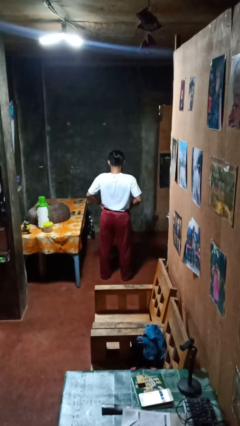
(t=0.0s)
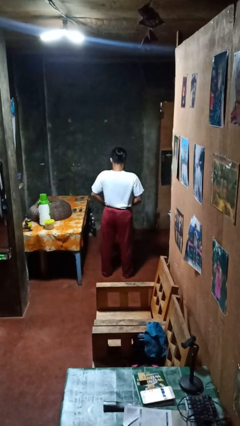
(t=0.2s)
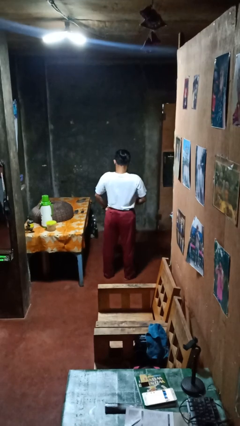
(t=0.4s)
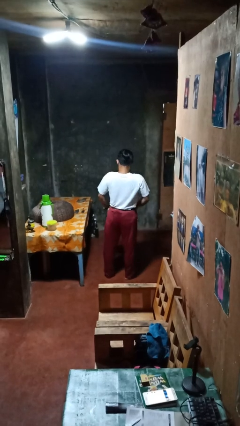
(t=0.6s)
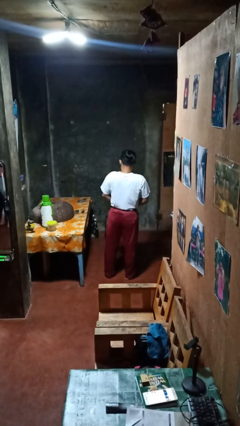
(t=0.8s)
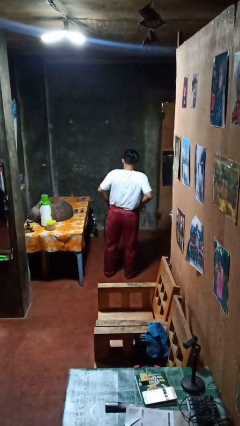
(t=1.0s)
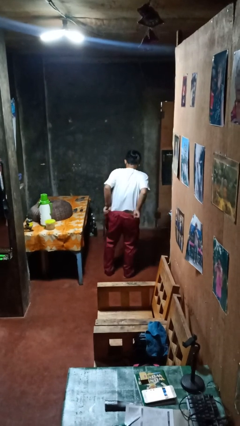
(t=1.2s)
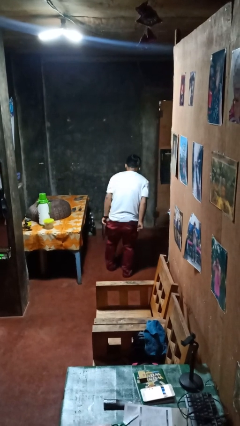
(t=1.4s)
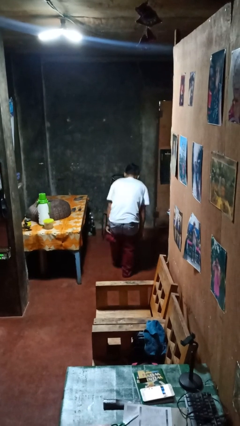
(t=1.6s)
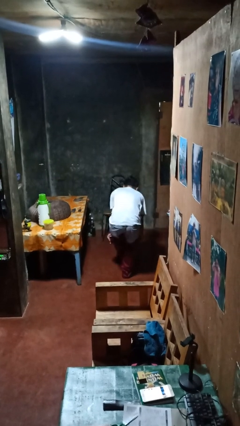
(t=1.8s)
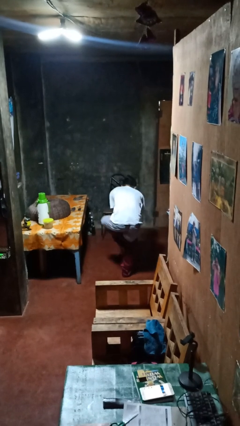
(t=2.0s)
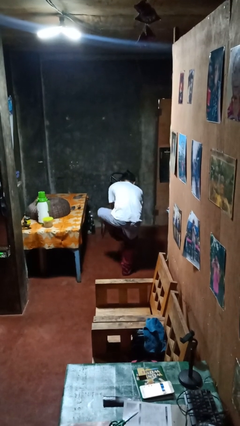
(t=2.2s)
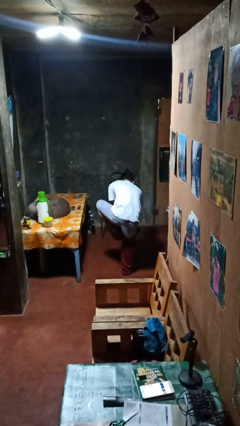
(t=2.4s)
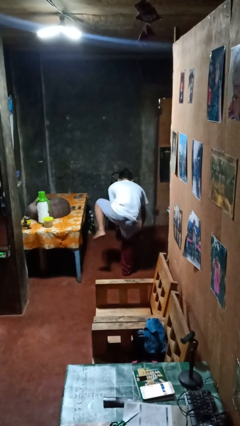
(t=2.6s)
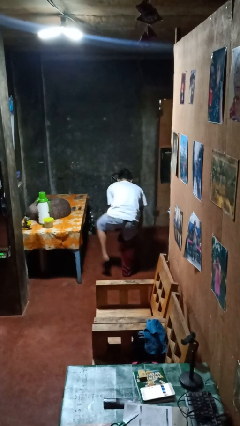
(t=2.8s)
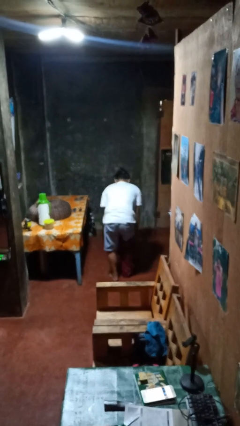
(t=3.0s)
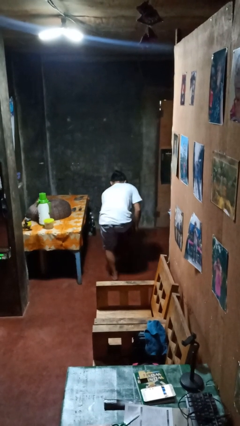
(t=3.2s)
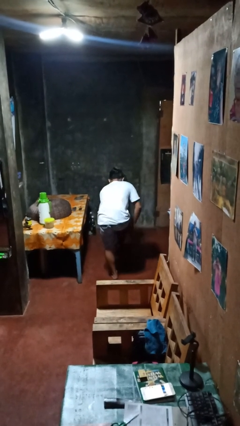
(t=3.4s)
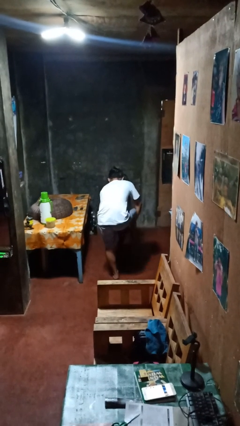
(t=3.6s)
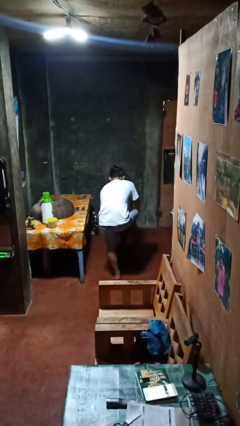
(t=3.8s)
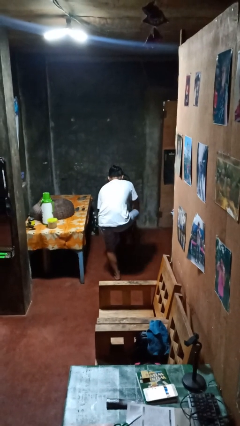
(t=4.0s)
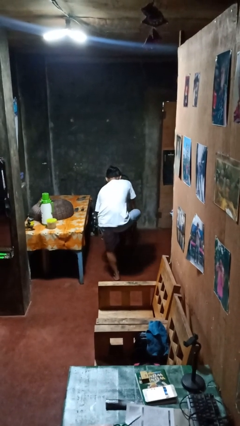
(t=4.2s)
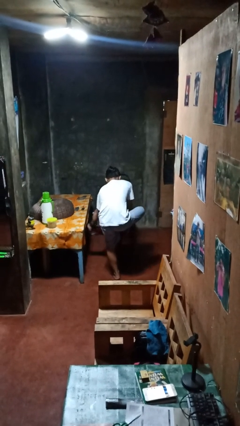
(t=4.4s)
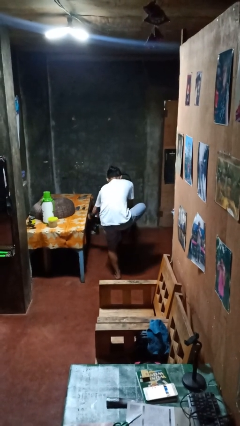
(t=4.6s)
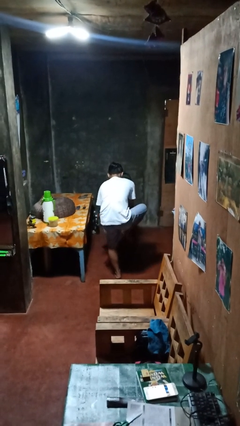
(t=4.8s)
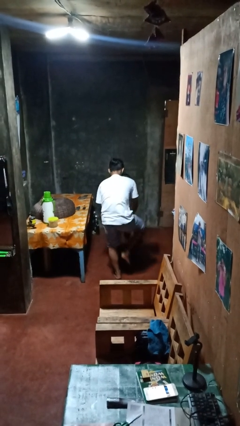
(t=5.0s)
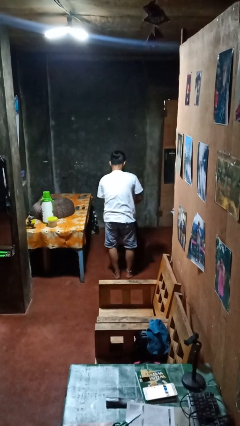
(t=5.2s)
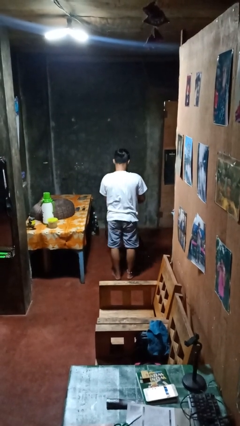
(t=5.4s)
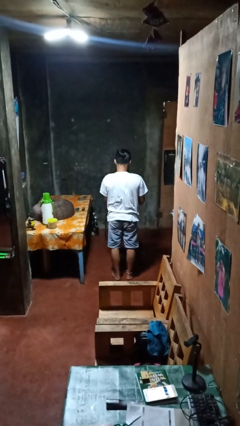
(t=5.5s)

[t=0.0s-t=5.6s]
person takes off pants

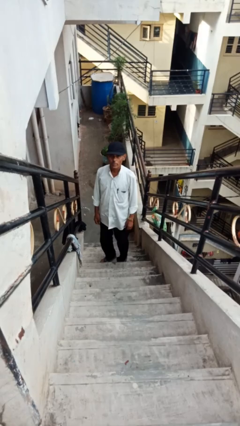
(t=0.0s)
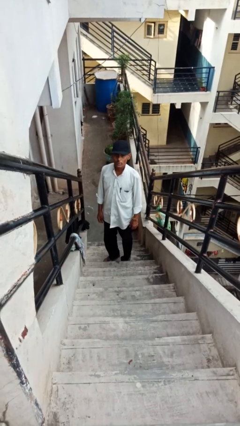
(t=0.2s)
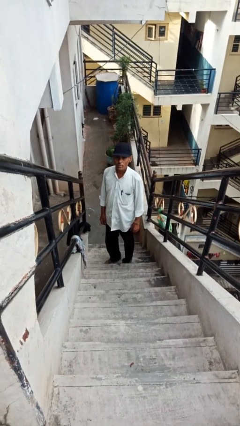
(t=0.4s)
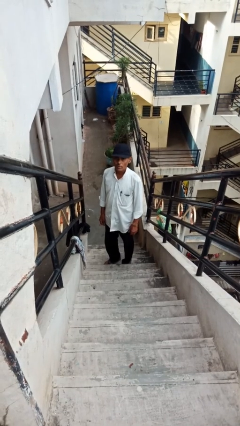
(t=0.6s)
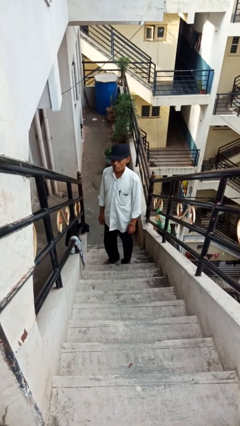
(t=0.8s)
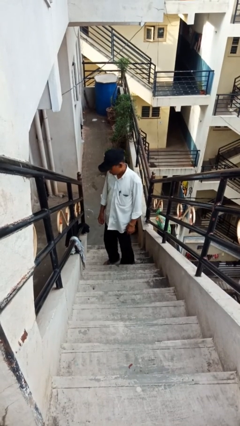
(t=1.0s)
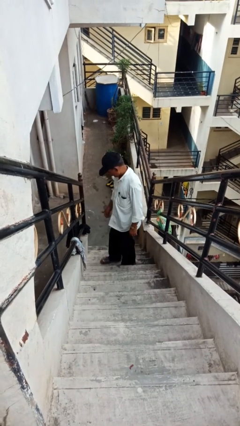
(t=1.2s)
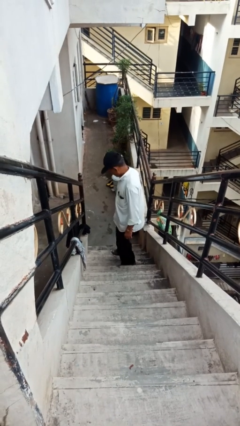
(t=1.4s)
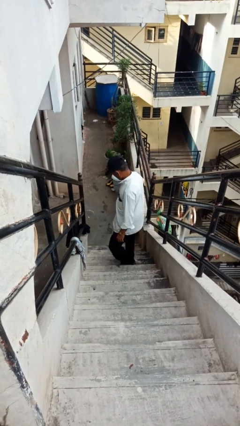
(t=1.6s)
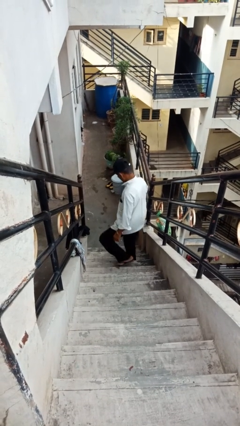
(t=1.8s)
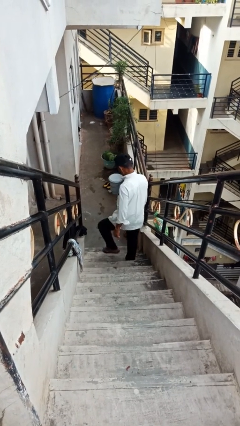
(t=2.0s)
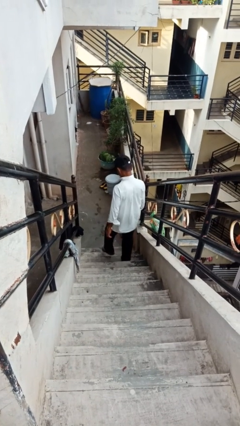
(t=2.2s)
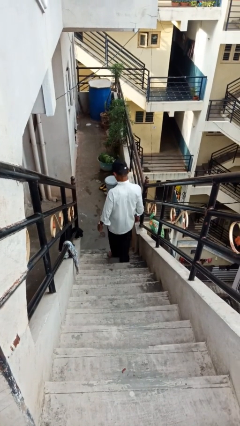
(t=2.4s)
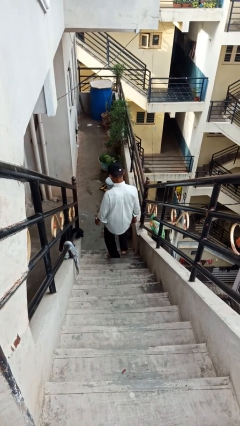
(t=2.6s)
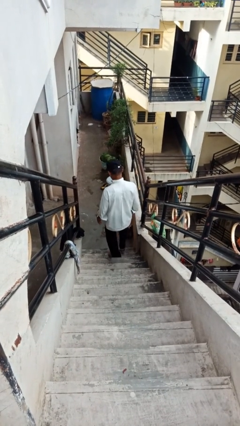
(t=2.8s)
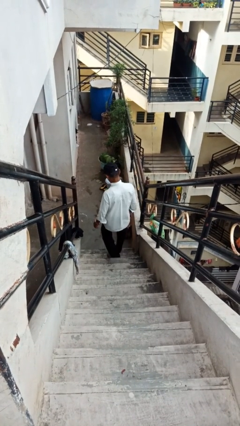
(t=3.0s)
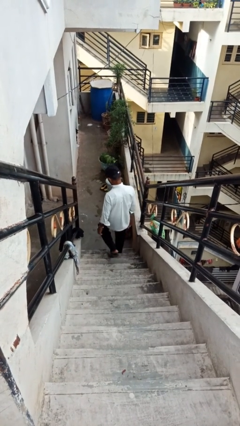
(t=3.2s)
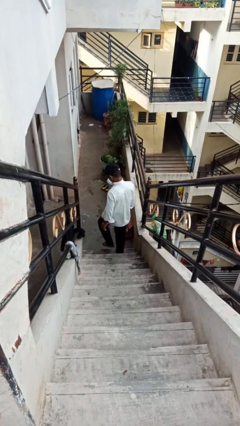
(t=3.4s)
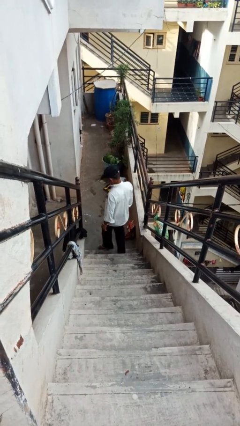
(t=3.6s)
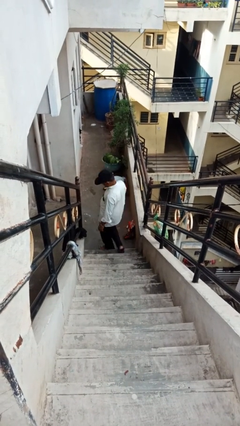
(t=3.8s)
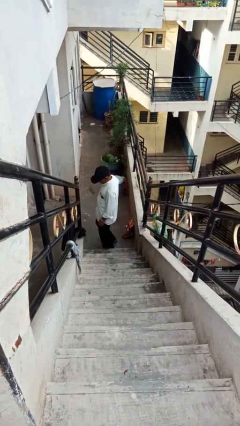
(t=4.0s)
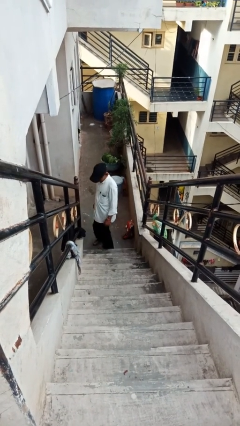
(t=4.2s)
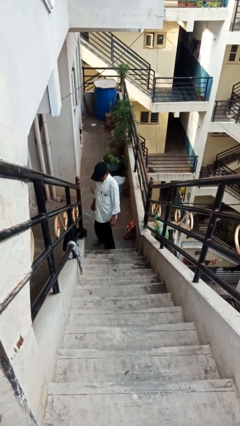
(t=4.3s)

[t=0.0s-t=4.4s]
person climbs down stairs

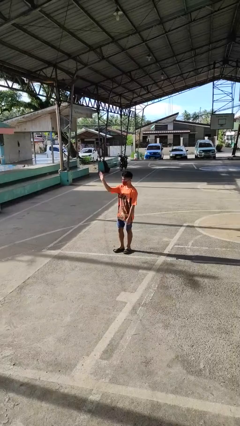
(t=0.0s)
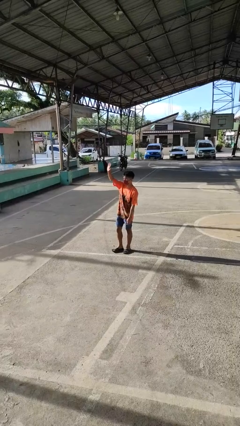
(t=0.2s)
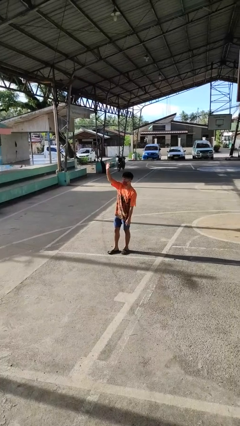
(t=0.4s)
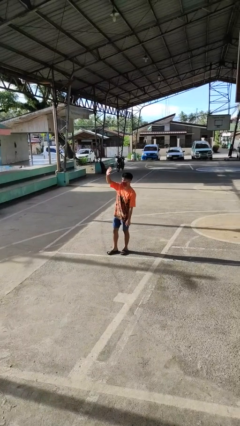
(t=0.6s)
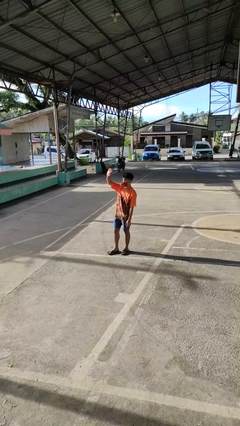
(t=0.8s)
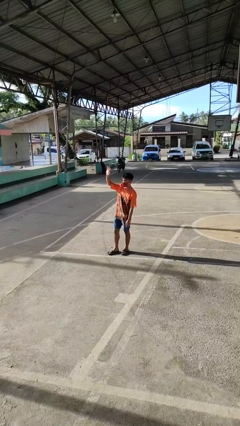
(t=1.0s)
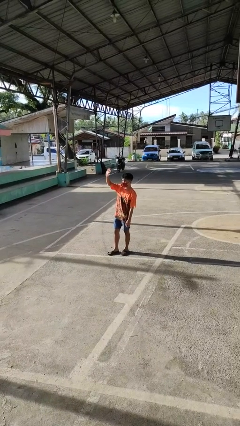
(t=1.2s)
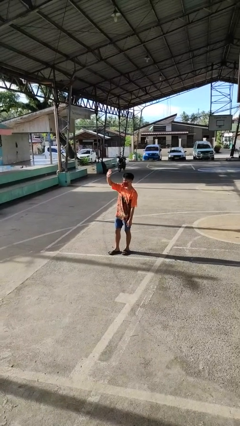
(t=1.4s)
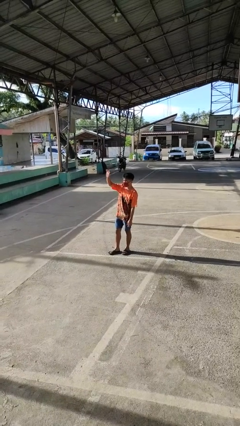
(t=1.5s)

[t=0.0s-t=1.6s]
person waves at person

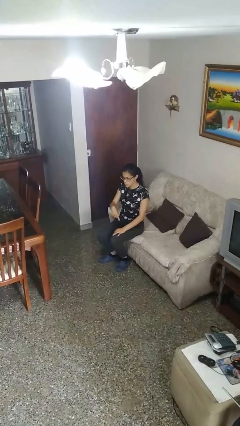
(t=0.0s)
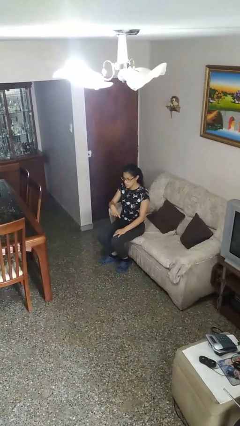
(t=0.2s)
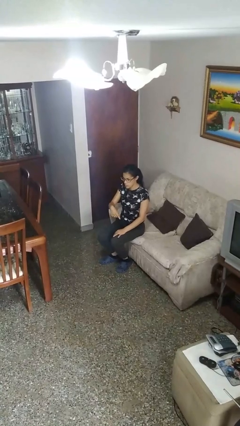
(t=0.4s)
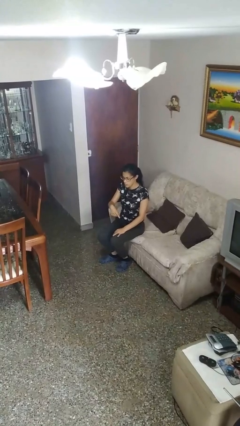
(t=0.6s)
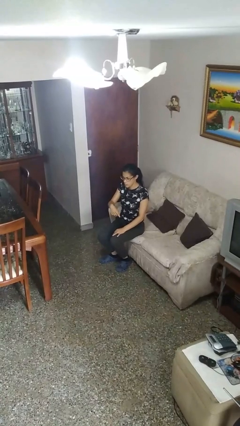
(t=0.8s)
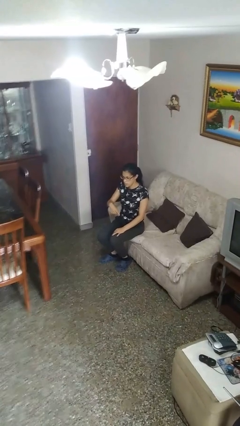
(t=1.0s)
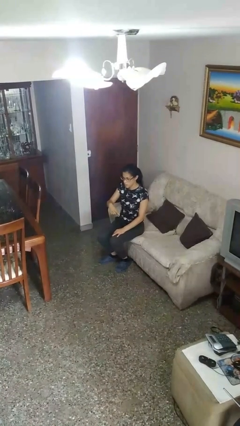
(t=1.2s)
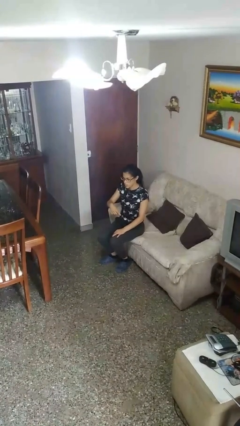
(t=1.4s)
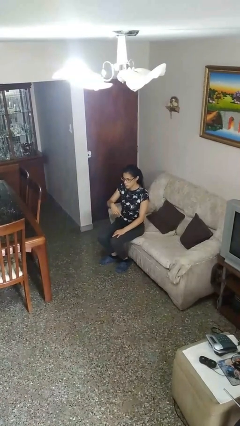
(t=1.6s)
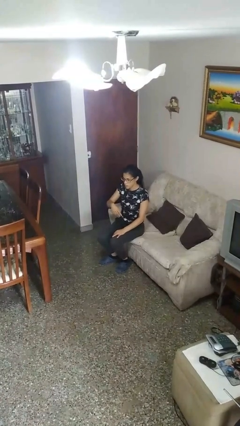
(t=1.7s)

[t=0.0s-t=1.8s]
person gestures swipe down

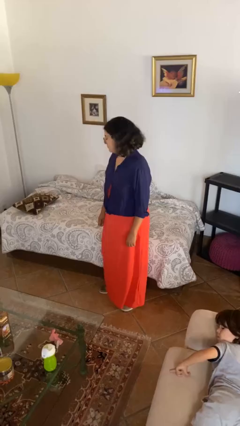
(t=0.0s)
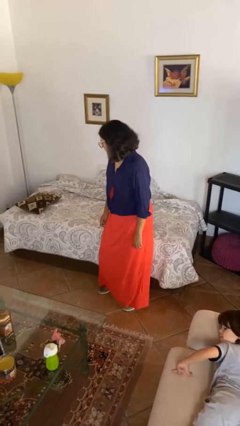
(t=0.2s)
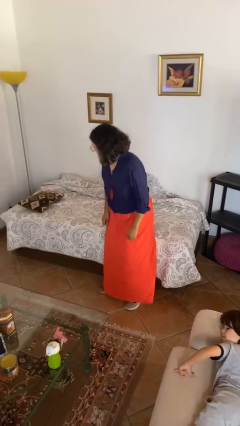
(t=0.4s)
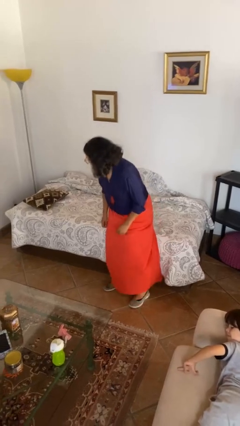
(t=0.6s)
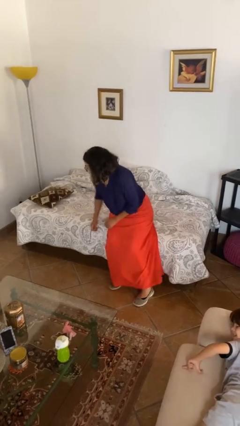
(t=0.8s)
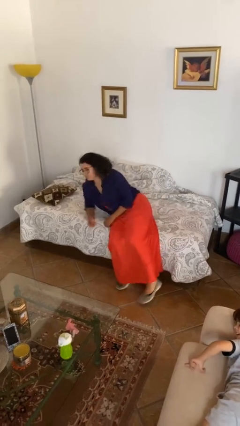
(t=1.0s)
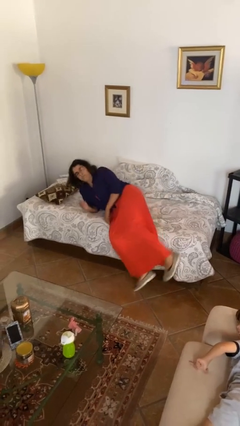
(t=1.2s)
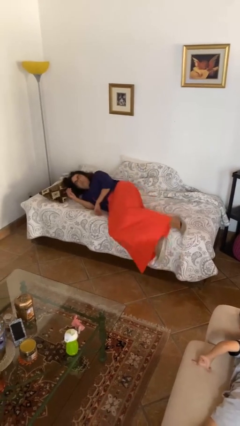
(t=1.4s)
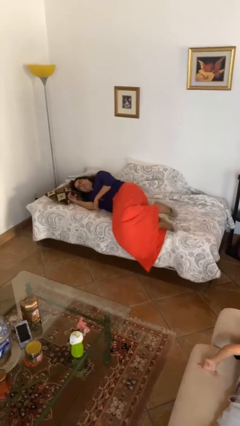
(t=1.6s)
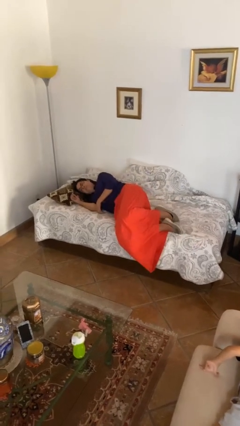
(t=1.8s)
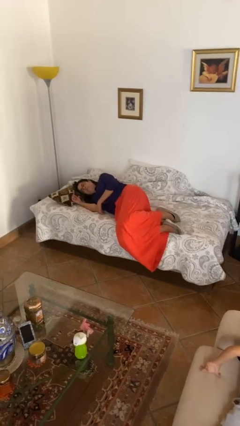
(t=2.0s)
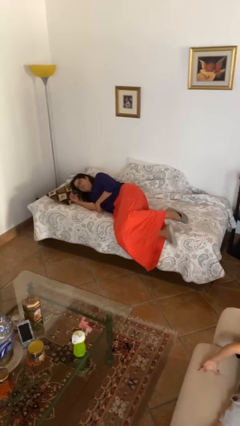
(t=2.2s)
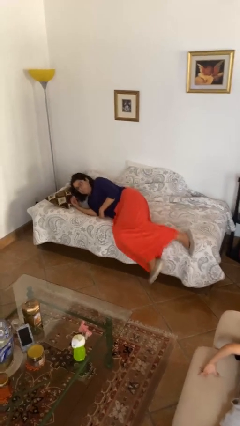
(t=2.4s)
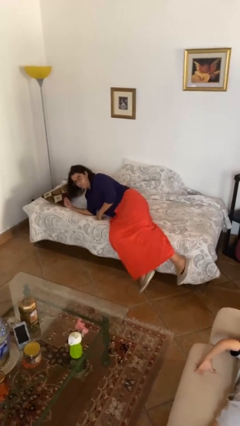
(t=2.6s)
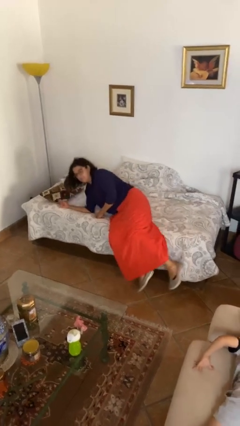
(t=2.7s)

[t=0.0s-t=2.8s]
person lies down on bed

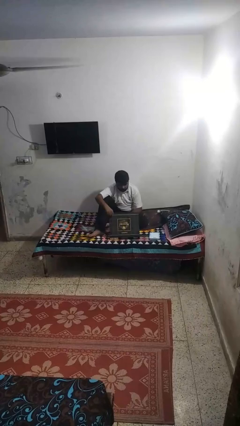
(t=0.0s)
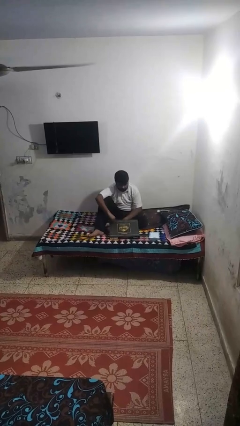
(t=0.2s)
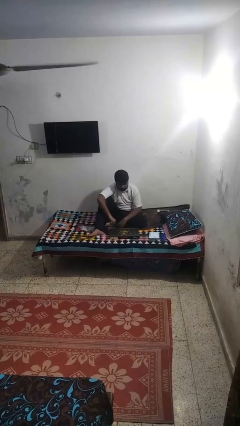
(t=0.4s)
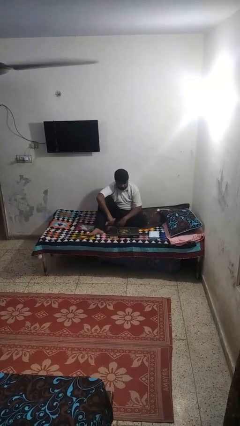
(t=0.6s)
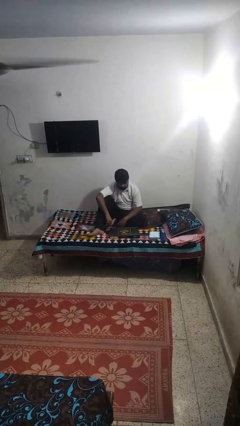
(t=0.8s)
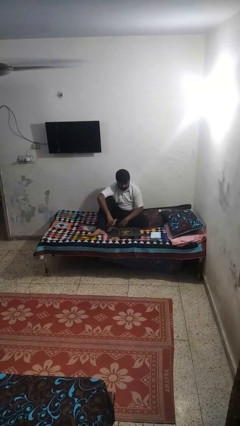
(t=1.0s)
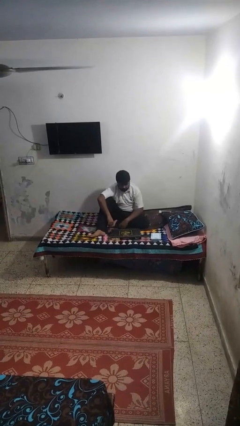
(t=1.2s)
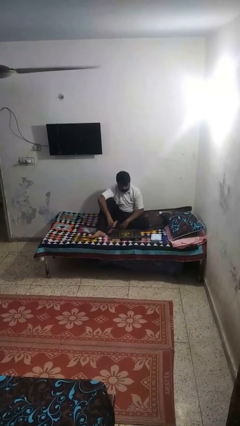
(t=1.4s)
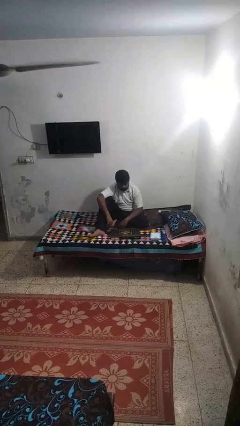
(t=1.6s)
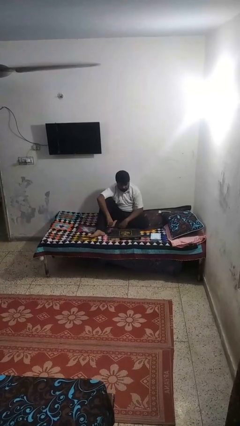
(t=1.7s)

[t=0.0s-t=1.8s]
person closes laptop
